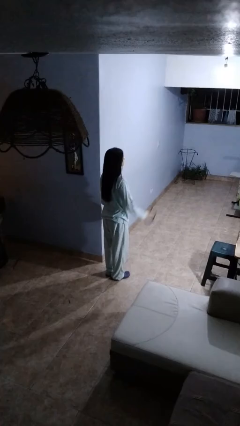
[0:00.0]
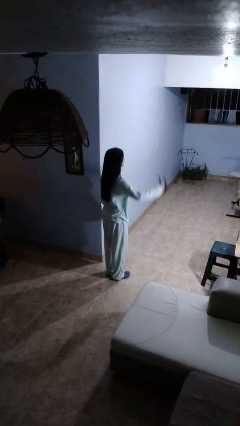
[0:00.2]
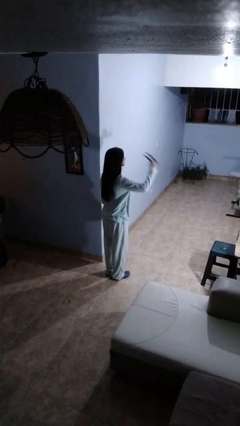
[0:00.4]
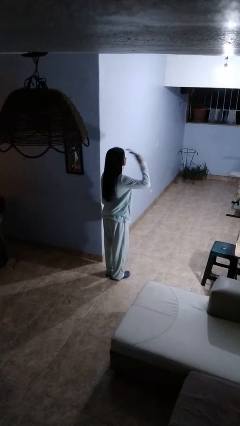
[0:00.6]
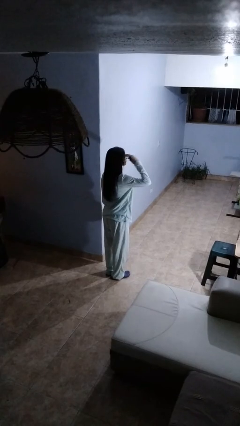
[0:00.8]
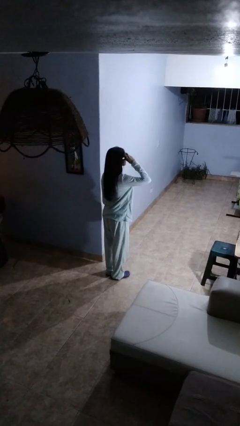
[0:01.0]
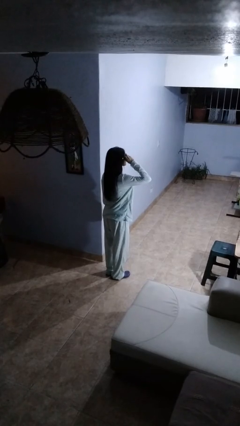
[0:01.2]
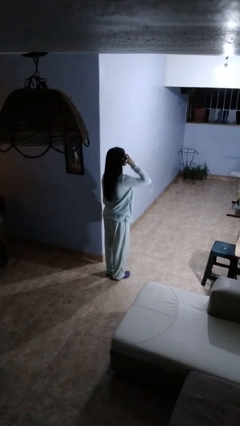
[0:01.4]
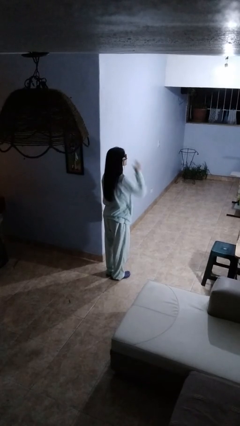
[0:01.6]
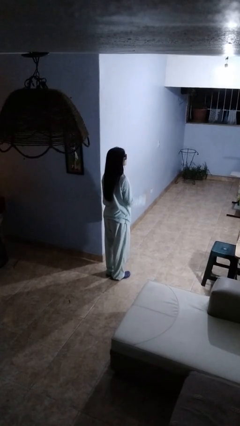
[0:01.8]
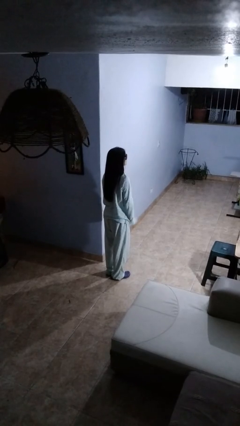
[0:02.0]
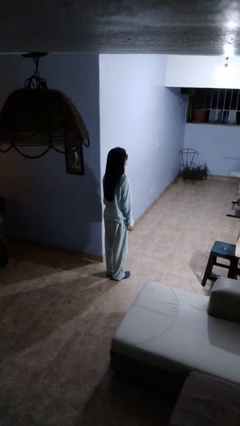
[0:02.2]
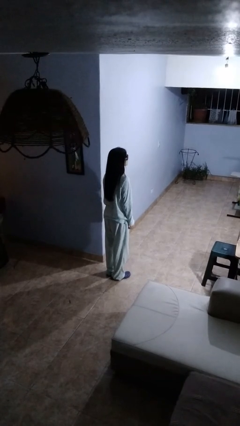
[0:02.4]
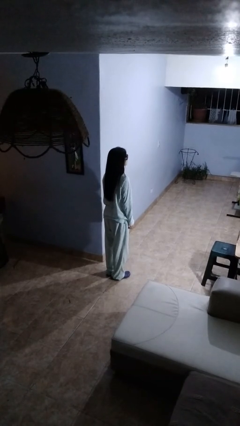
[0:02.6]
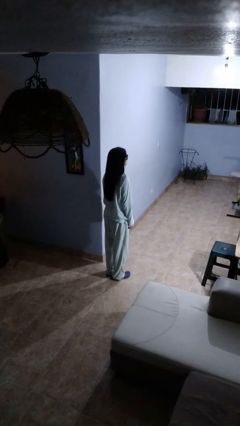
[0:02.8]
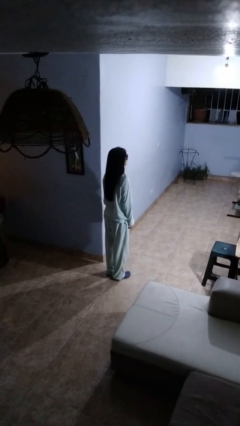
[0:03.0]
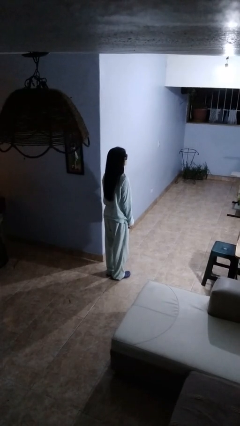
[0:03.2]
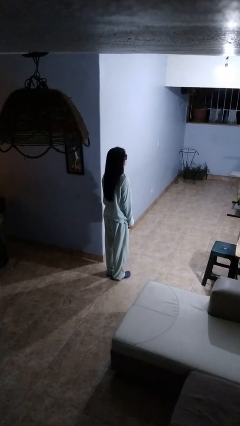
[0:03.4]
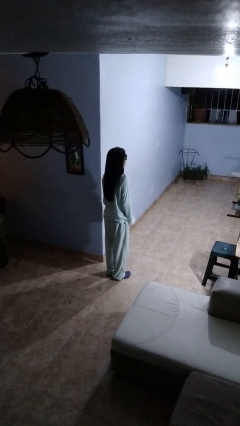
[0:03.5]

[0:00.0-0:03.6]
person puts on sunglasses

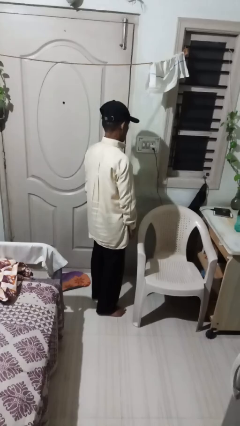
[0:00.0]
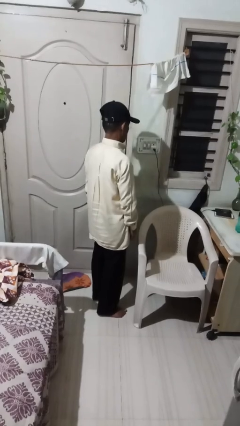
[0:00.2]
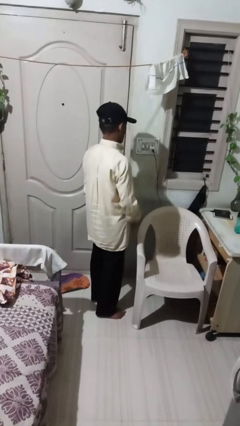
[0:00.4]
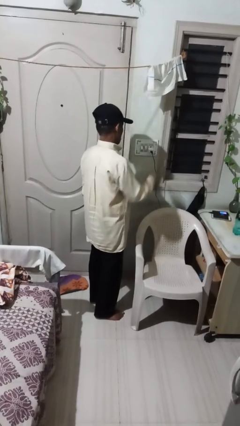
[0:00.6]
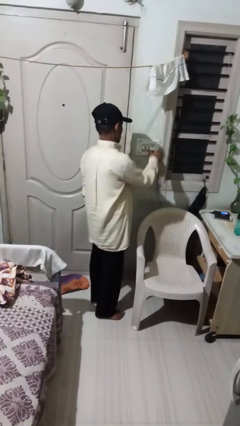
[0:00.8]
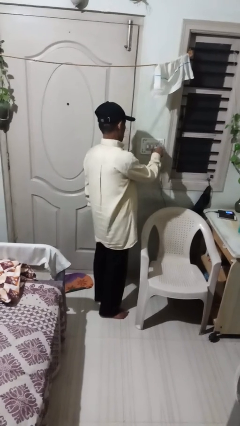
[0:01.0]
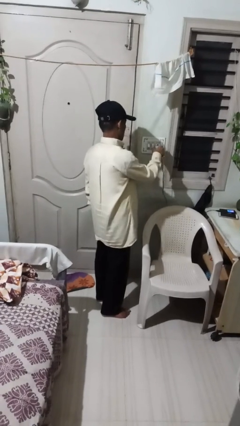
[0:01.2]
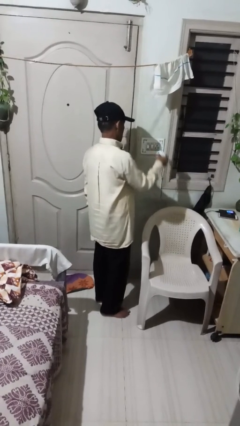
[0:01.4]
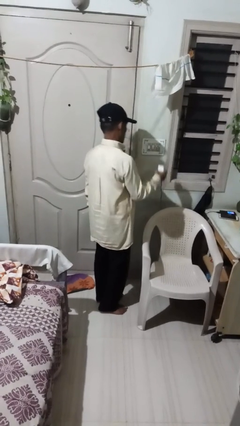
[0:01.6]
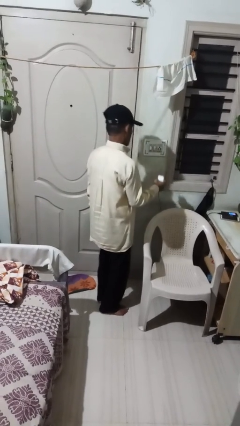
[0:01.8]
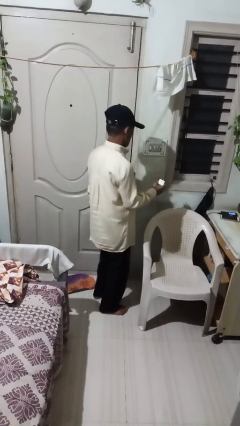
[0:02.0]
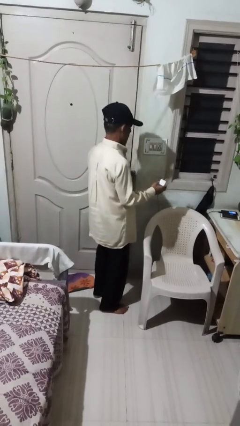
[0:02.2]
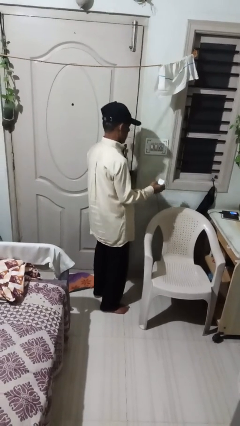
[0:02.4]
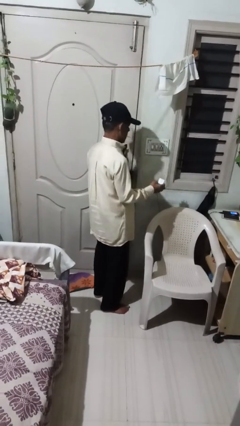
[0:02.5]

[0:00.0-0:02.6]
person unplugs from electrical socket

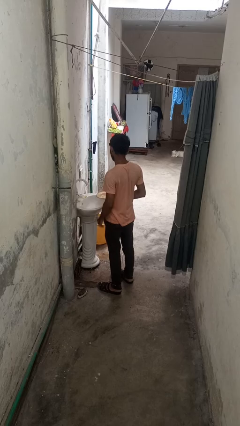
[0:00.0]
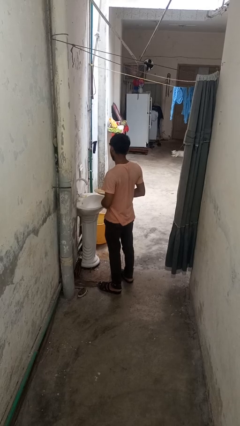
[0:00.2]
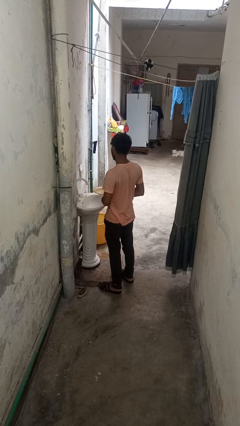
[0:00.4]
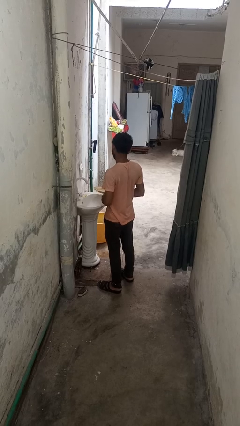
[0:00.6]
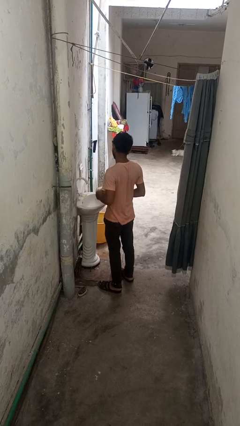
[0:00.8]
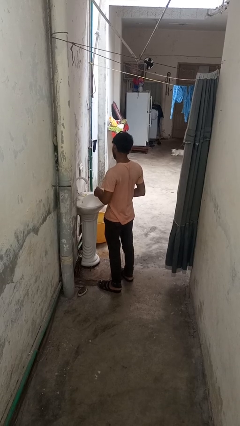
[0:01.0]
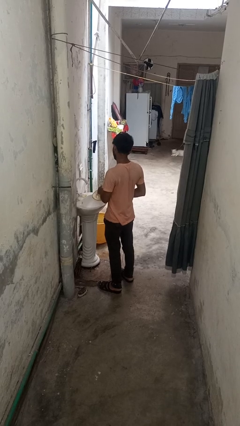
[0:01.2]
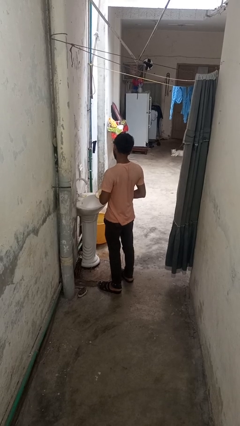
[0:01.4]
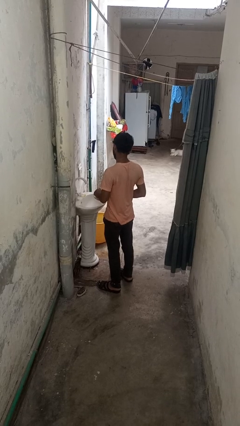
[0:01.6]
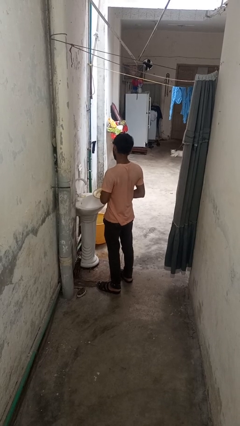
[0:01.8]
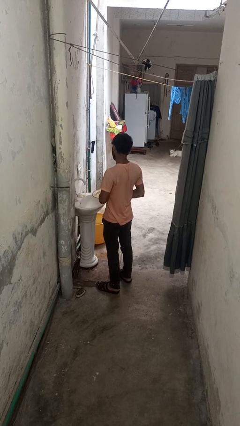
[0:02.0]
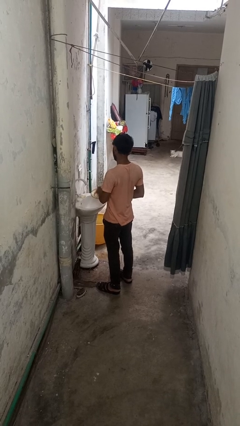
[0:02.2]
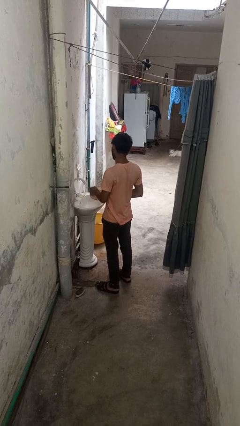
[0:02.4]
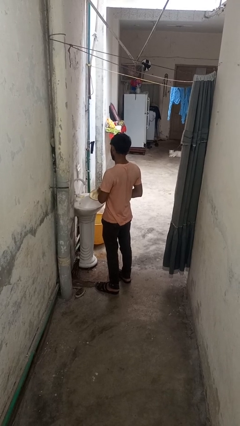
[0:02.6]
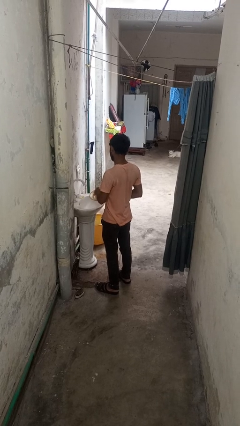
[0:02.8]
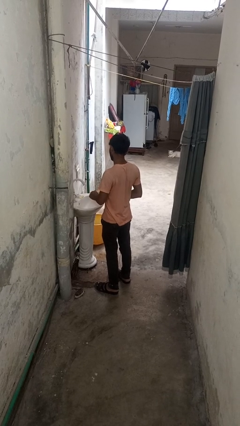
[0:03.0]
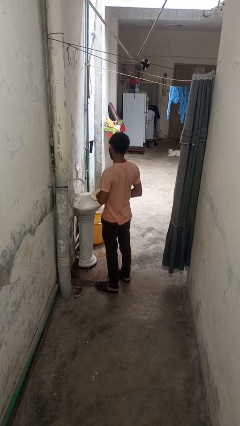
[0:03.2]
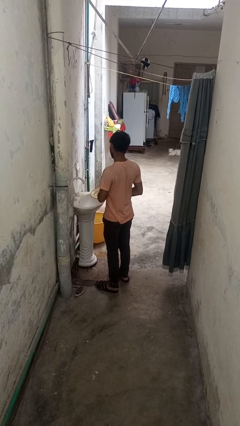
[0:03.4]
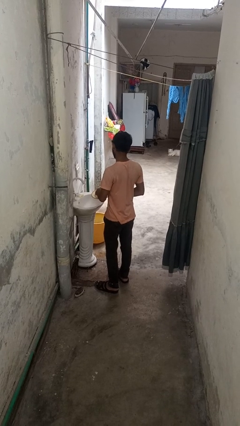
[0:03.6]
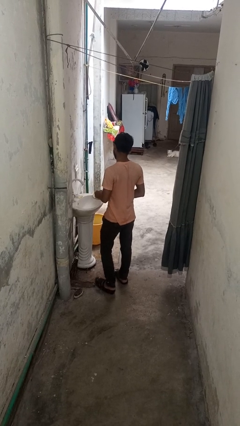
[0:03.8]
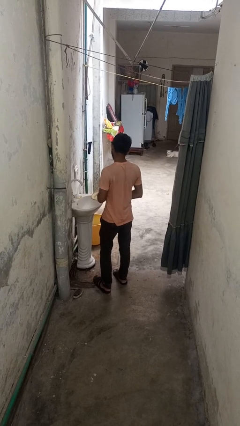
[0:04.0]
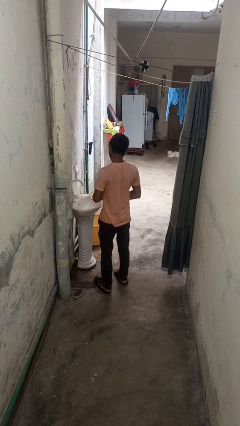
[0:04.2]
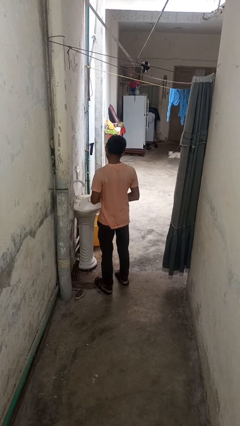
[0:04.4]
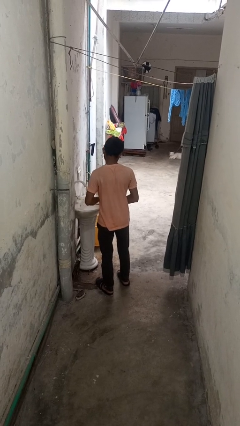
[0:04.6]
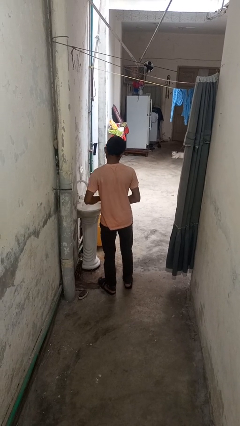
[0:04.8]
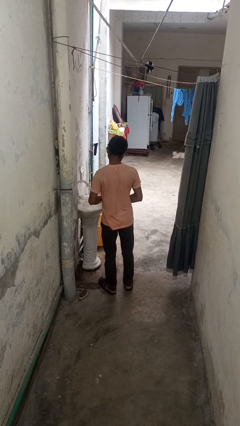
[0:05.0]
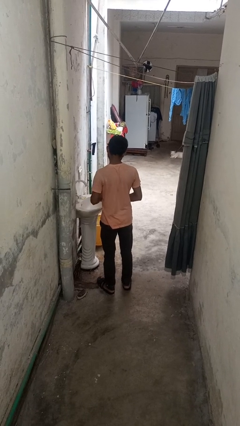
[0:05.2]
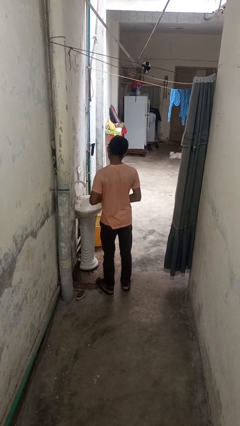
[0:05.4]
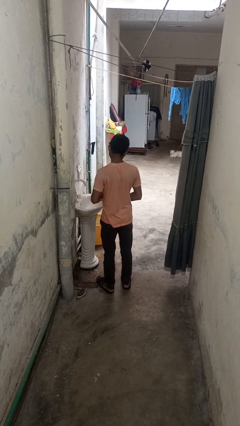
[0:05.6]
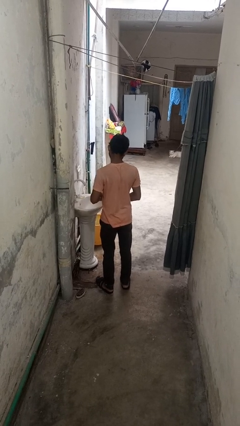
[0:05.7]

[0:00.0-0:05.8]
person dries dish

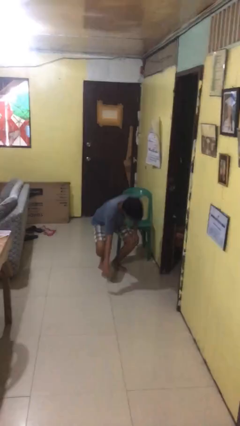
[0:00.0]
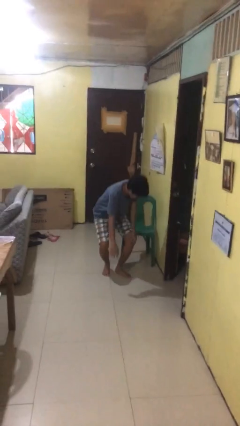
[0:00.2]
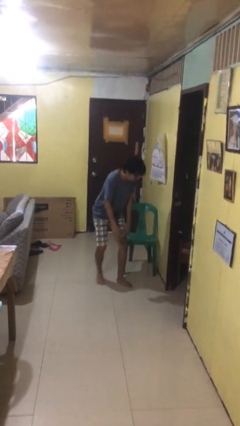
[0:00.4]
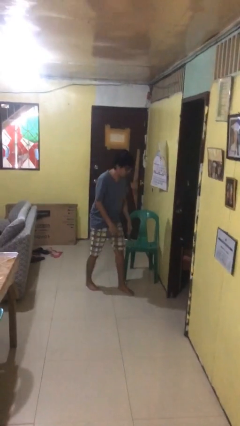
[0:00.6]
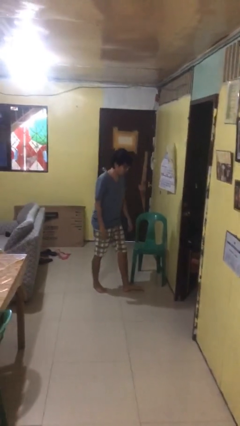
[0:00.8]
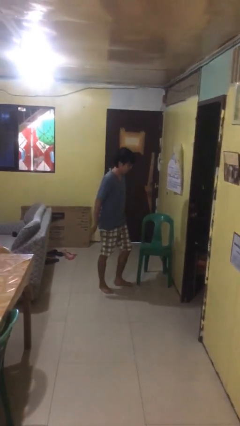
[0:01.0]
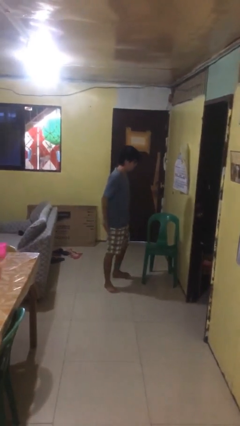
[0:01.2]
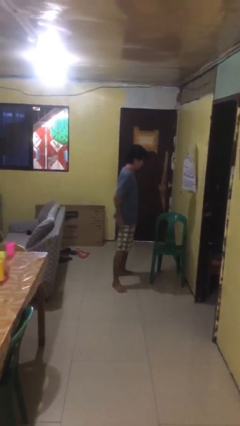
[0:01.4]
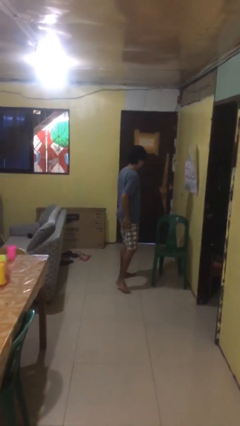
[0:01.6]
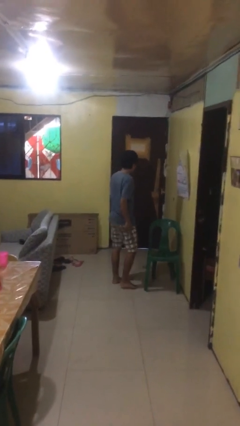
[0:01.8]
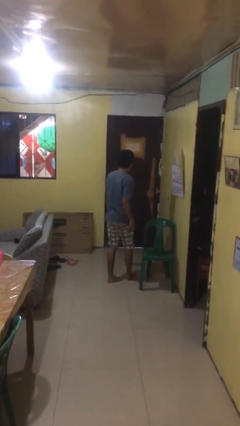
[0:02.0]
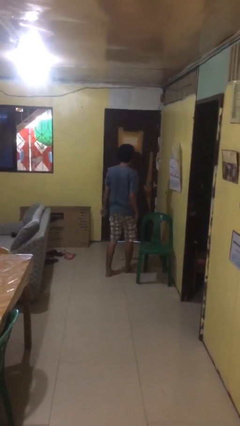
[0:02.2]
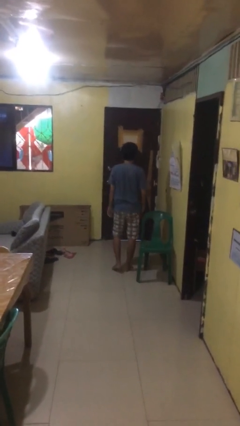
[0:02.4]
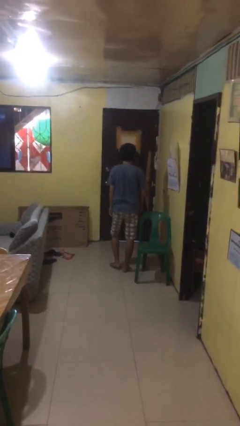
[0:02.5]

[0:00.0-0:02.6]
person stands up from floor

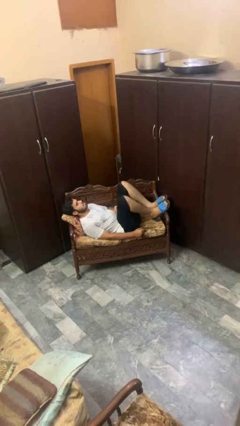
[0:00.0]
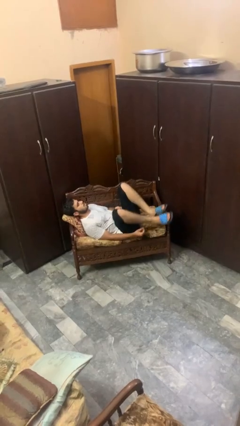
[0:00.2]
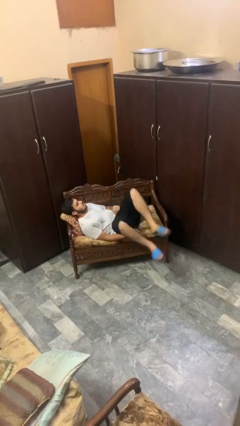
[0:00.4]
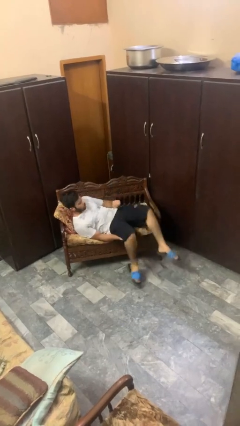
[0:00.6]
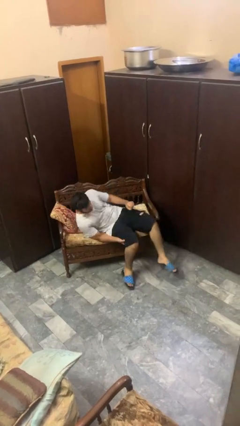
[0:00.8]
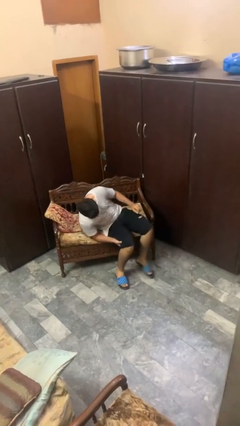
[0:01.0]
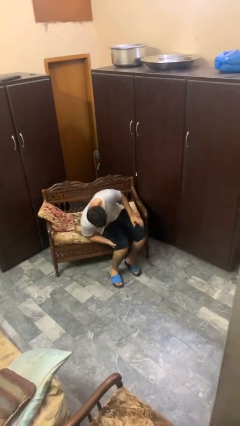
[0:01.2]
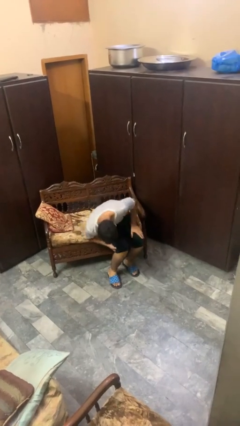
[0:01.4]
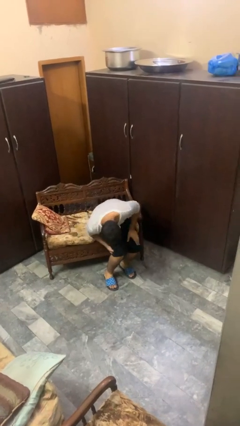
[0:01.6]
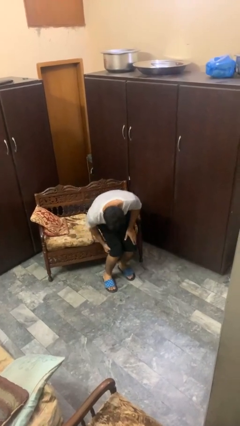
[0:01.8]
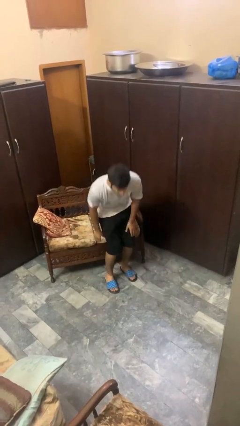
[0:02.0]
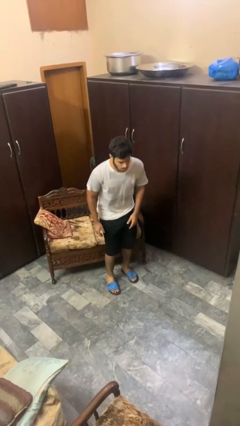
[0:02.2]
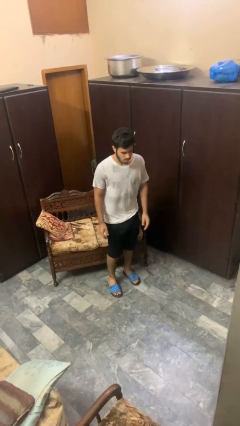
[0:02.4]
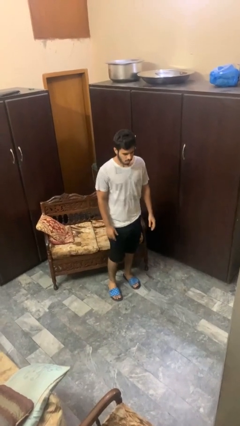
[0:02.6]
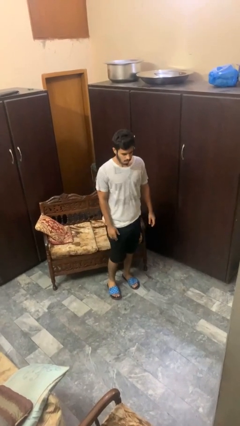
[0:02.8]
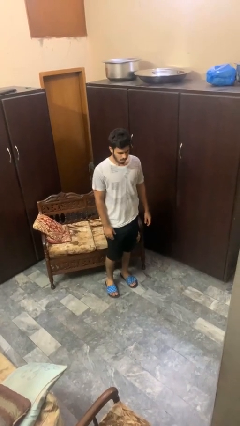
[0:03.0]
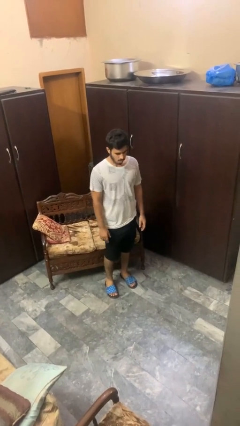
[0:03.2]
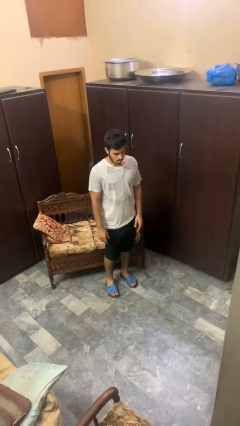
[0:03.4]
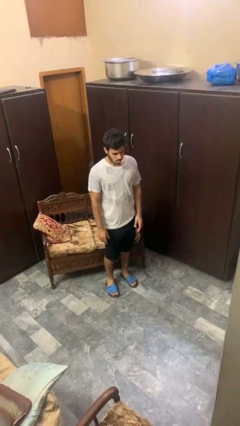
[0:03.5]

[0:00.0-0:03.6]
person stands up
